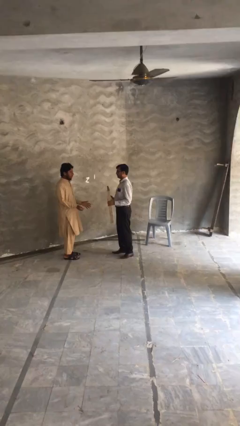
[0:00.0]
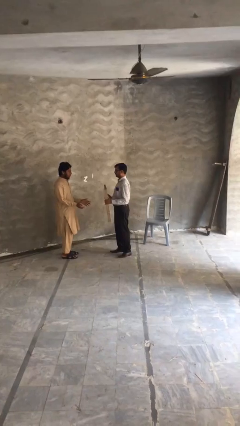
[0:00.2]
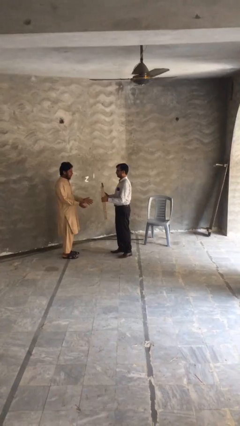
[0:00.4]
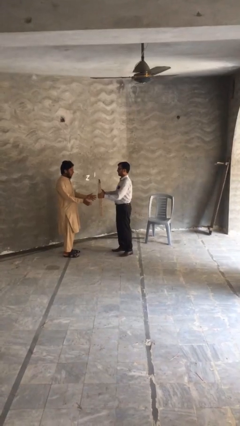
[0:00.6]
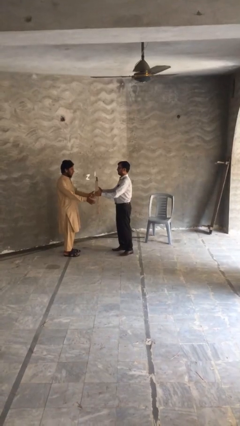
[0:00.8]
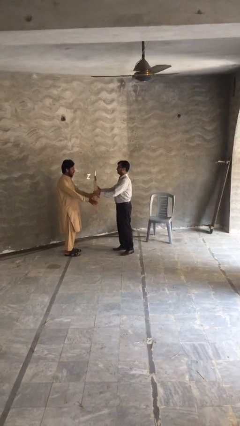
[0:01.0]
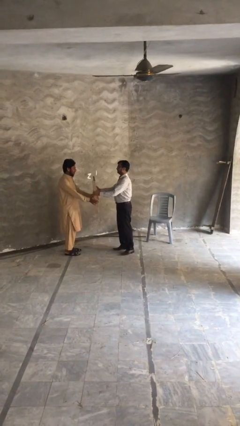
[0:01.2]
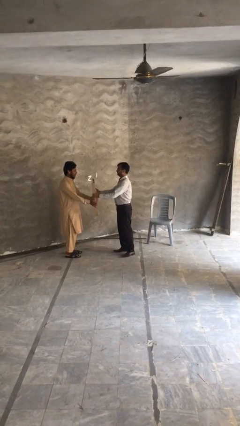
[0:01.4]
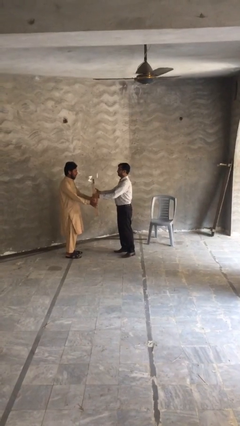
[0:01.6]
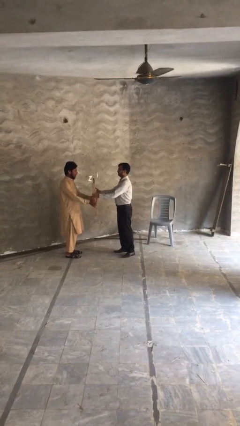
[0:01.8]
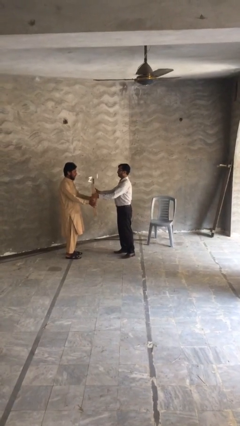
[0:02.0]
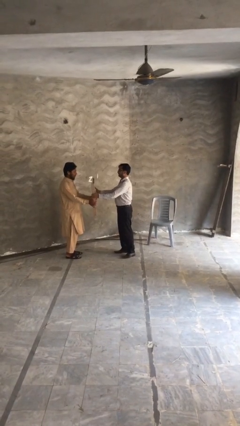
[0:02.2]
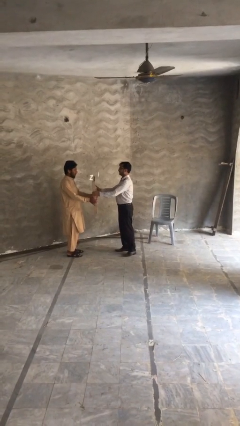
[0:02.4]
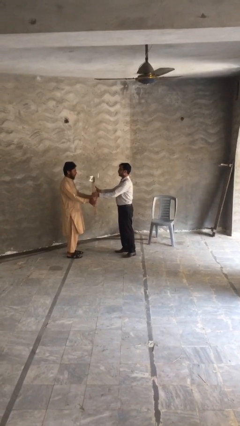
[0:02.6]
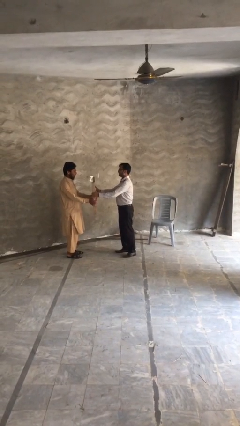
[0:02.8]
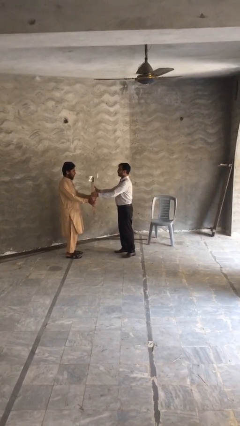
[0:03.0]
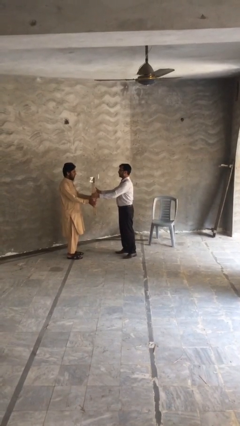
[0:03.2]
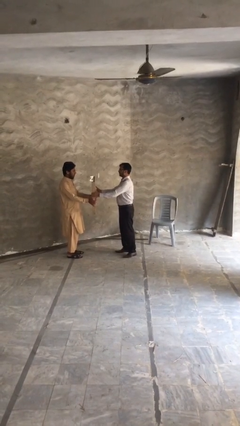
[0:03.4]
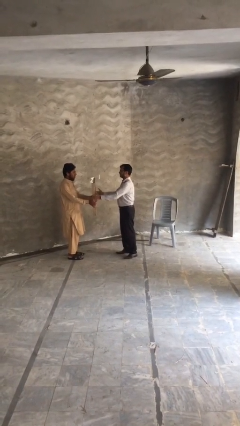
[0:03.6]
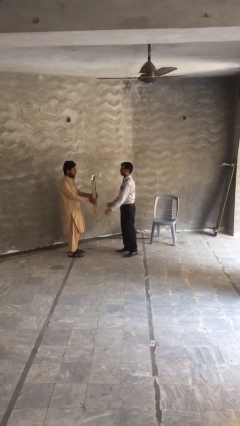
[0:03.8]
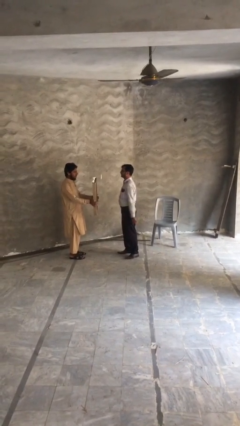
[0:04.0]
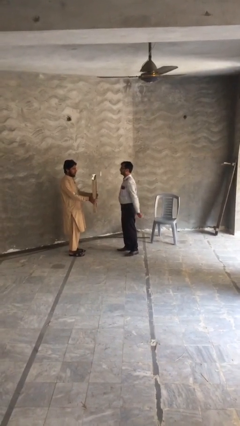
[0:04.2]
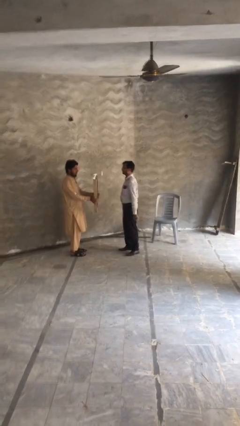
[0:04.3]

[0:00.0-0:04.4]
person transfers object to person

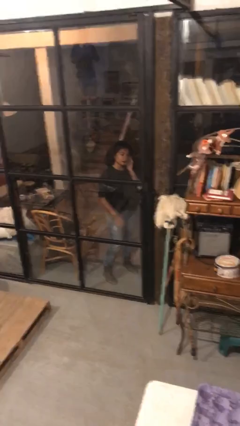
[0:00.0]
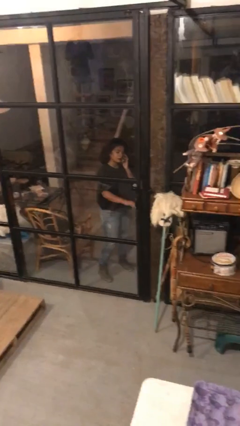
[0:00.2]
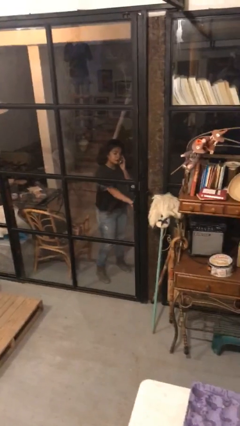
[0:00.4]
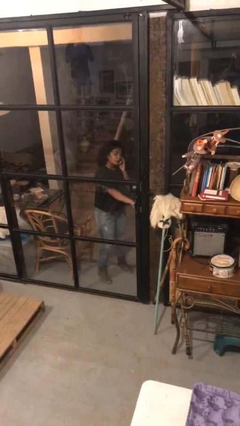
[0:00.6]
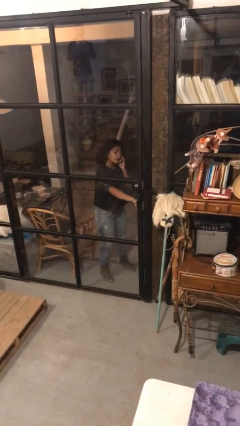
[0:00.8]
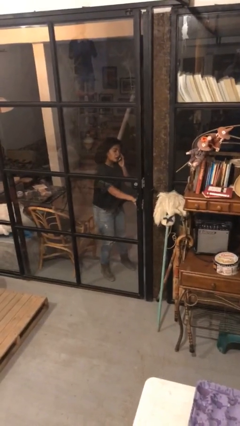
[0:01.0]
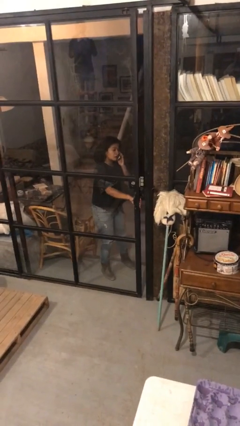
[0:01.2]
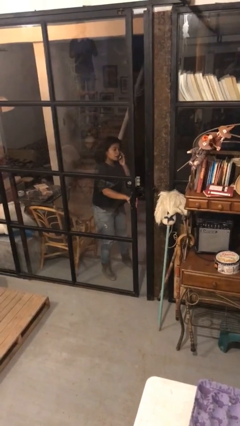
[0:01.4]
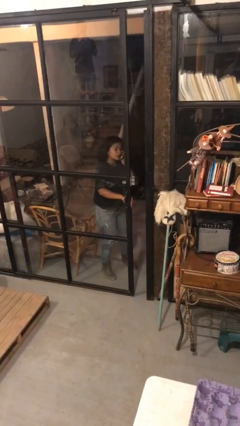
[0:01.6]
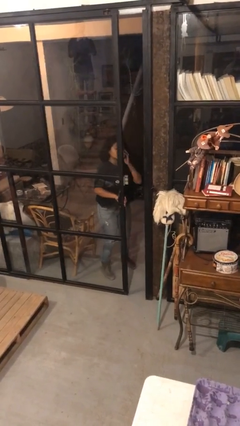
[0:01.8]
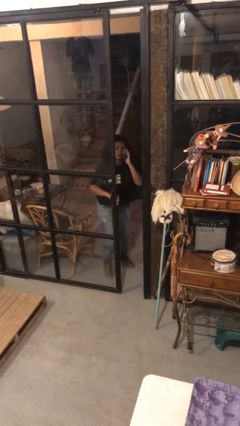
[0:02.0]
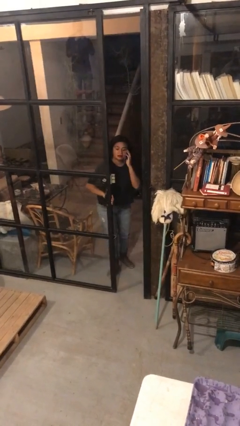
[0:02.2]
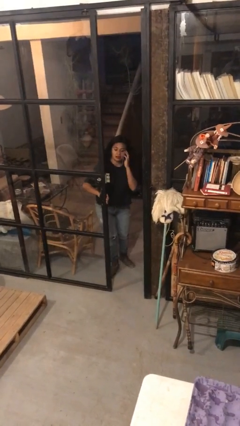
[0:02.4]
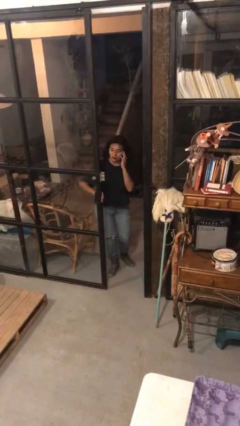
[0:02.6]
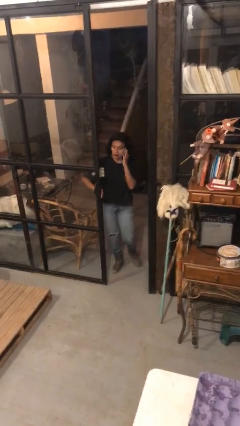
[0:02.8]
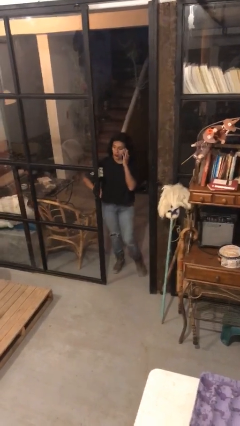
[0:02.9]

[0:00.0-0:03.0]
person opens facility door

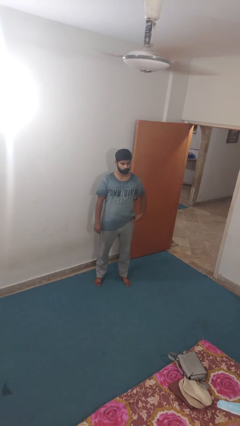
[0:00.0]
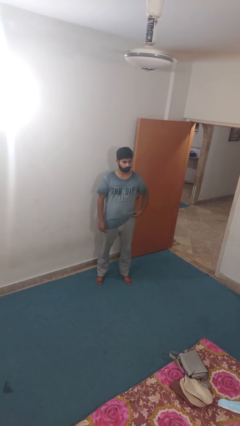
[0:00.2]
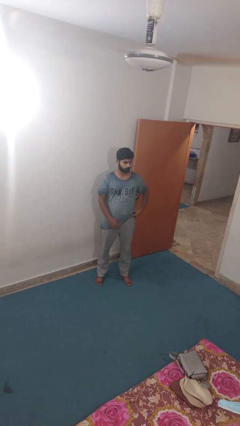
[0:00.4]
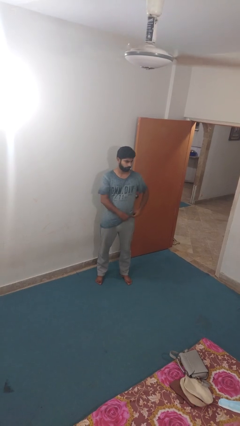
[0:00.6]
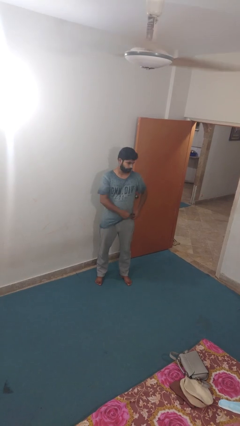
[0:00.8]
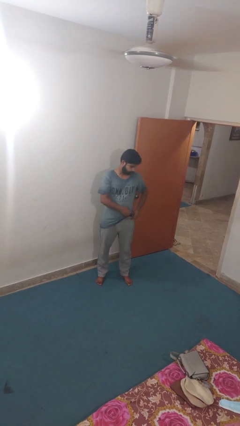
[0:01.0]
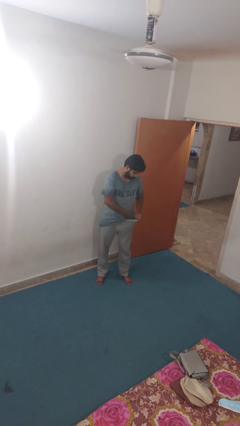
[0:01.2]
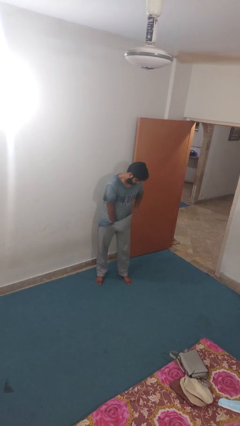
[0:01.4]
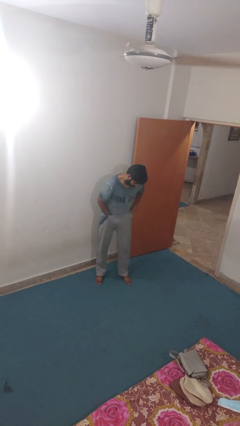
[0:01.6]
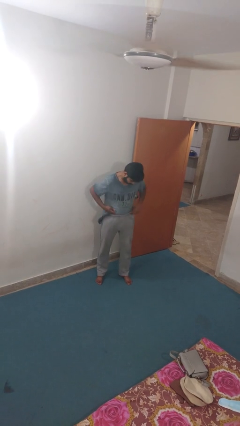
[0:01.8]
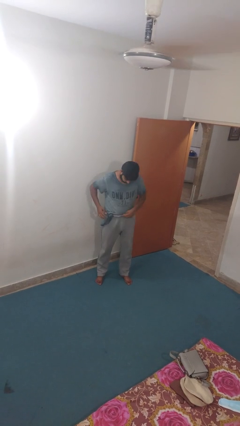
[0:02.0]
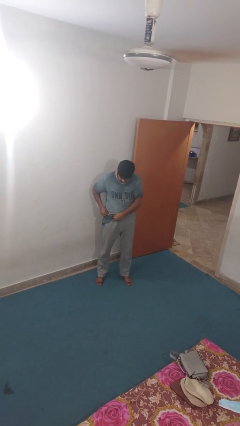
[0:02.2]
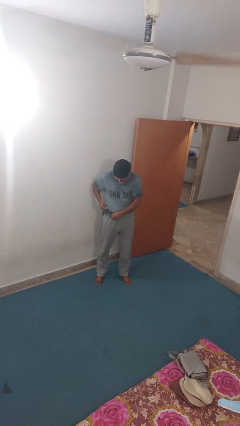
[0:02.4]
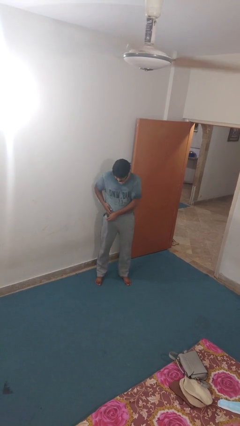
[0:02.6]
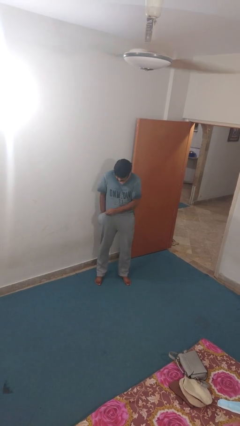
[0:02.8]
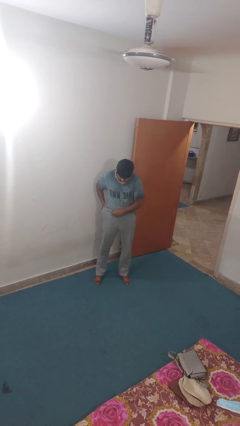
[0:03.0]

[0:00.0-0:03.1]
person tucks in shirt

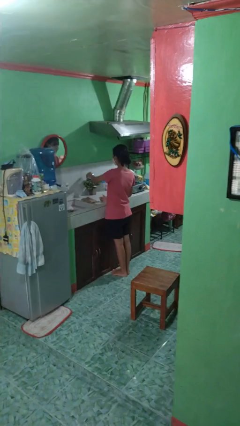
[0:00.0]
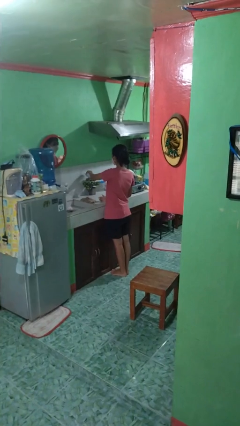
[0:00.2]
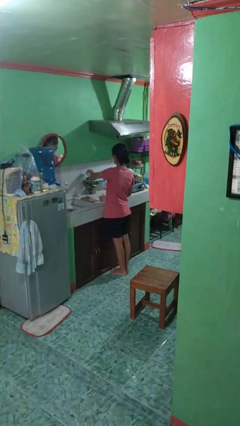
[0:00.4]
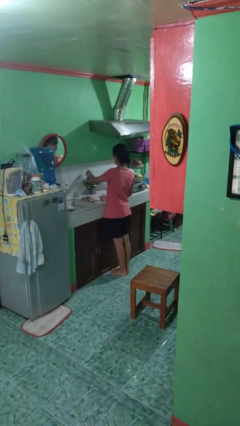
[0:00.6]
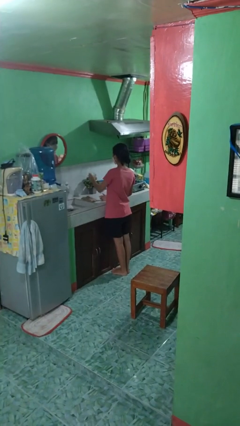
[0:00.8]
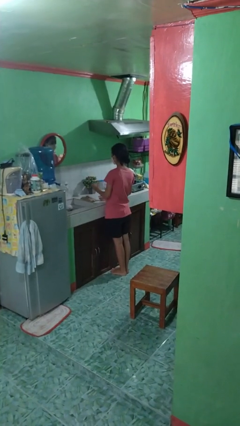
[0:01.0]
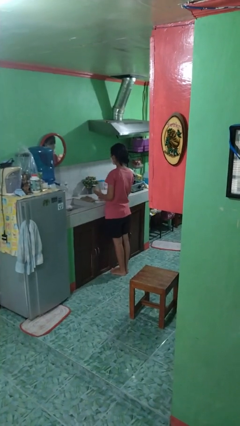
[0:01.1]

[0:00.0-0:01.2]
person waters houseplant

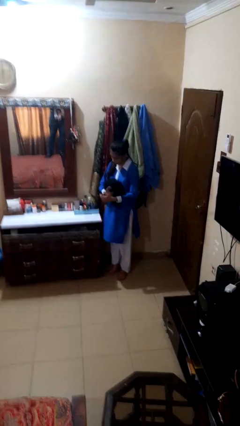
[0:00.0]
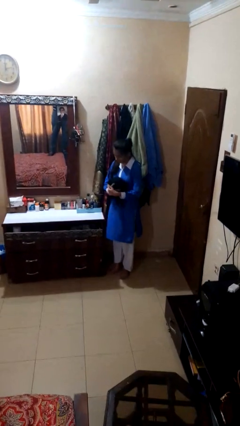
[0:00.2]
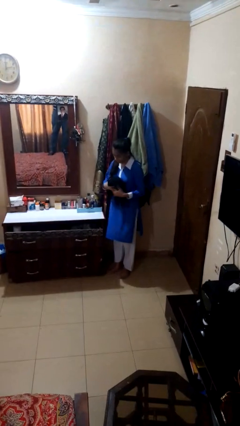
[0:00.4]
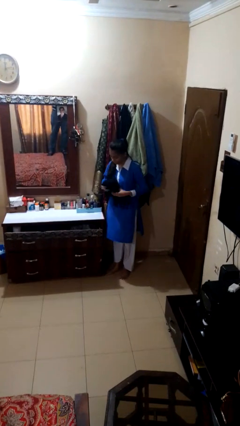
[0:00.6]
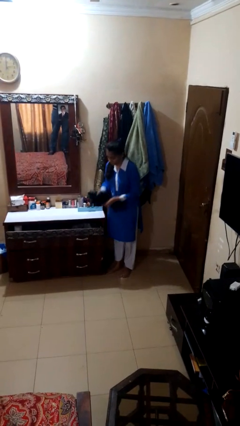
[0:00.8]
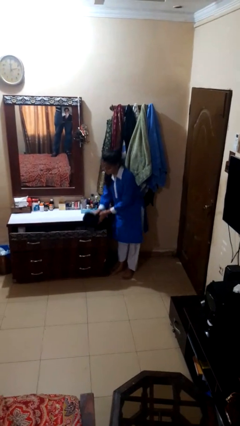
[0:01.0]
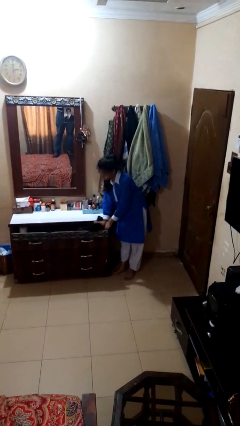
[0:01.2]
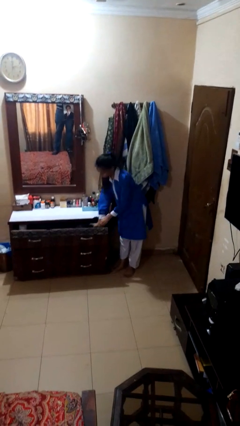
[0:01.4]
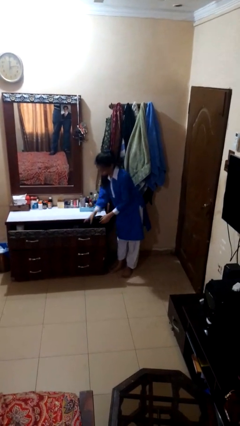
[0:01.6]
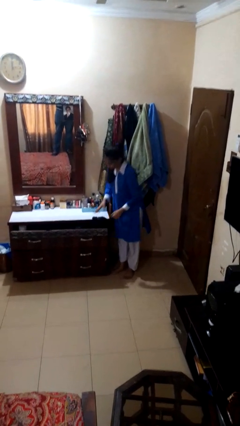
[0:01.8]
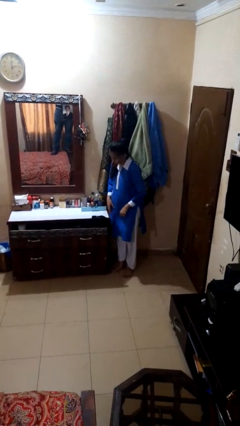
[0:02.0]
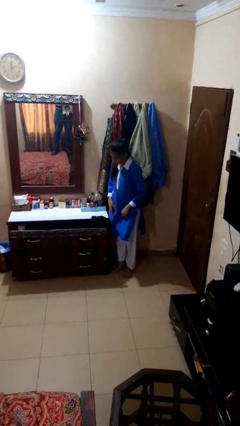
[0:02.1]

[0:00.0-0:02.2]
person puts clothes into dresser

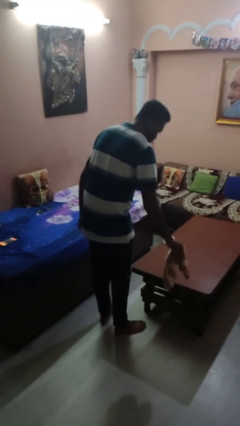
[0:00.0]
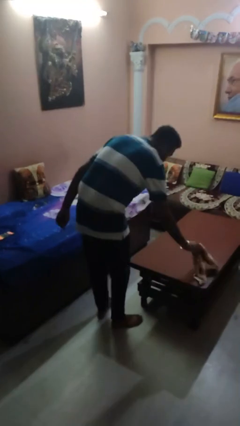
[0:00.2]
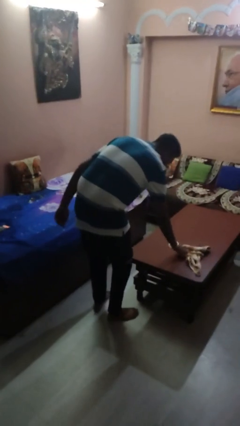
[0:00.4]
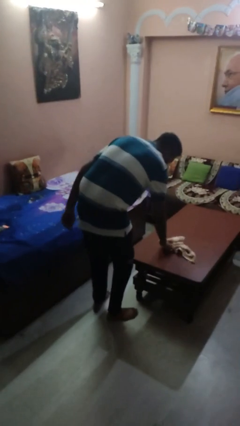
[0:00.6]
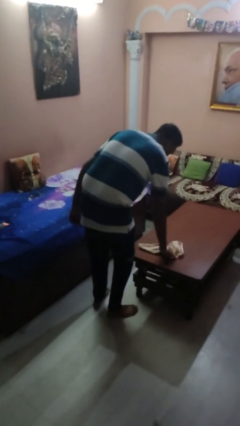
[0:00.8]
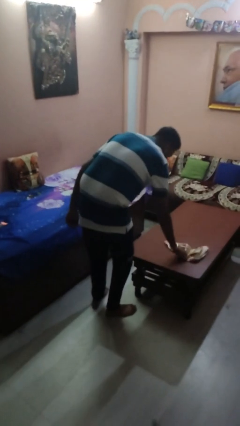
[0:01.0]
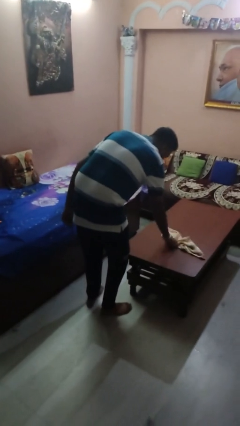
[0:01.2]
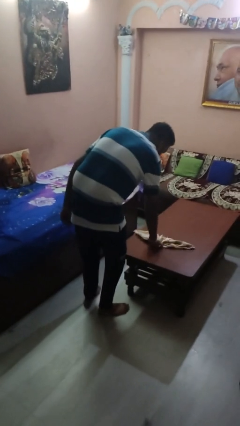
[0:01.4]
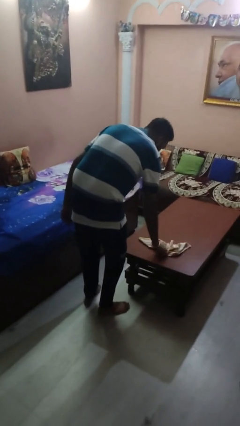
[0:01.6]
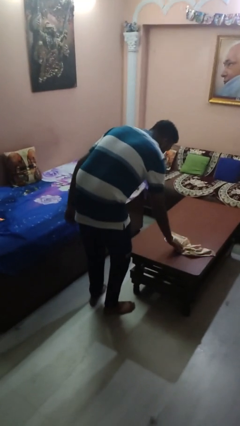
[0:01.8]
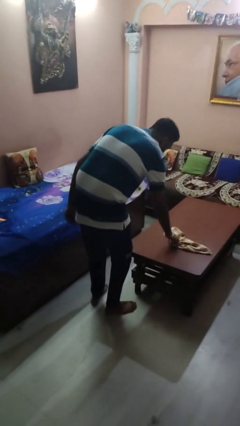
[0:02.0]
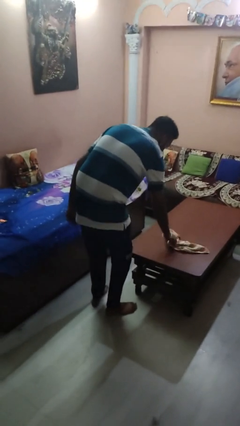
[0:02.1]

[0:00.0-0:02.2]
person cleans table with rag

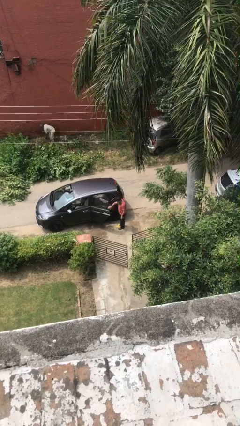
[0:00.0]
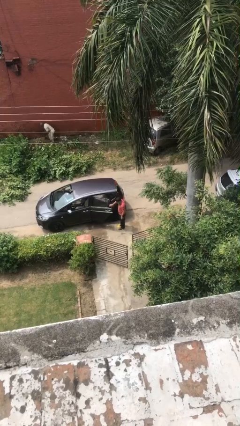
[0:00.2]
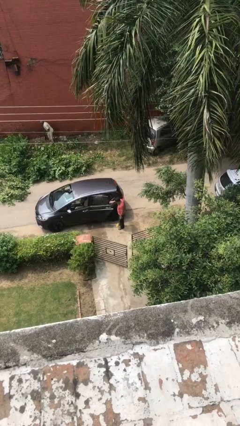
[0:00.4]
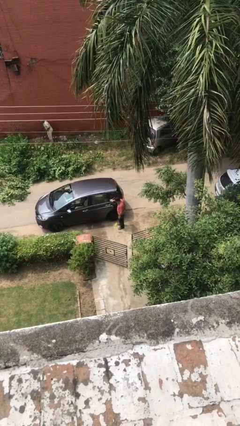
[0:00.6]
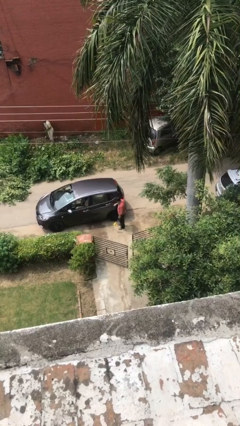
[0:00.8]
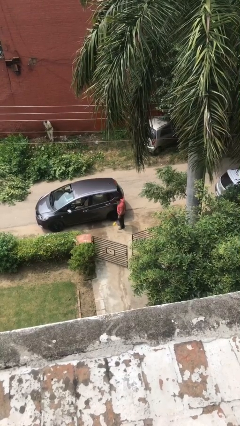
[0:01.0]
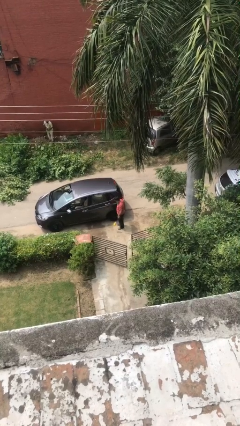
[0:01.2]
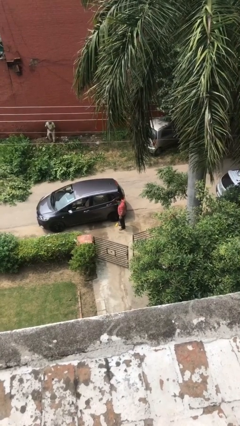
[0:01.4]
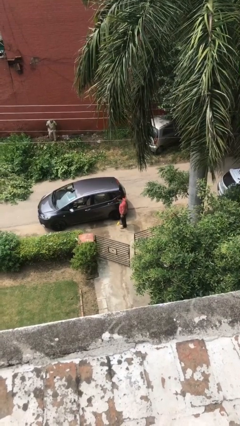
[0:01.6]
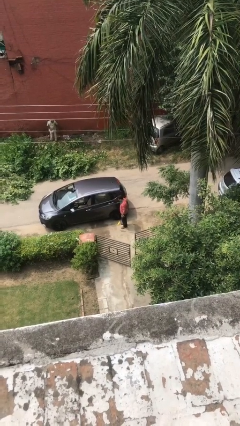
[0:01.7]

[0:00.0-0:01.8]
person closes car door
